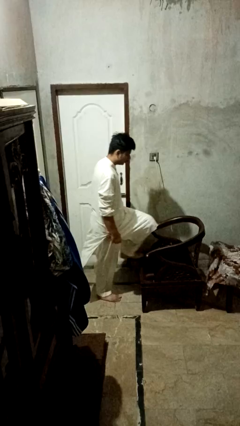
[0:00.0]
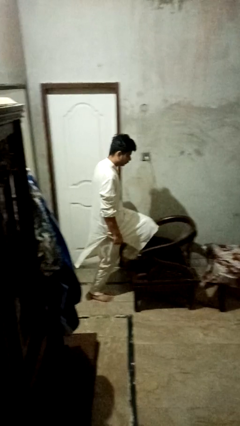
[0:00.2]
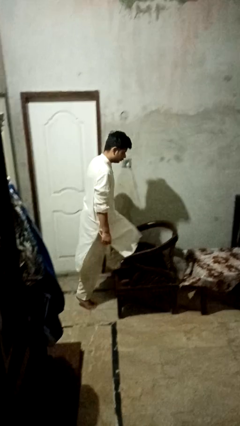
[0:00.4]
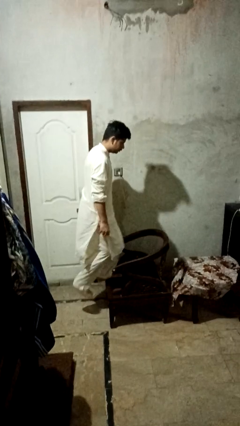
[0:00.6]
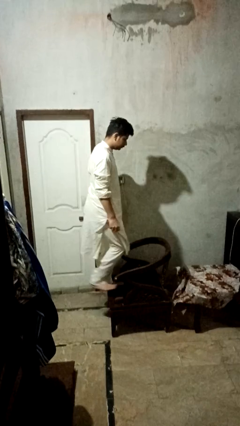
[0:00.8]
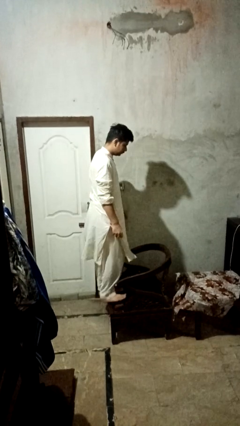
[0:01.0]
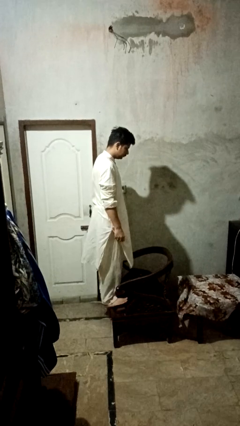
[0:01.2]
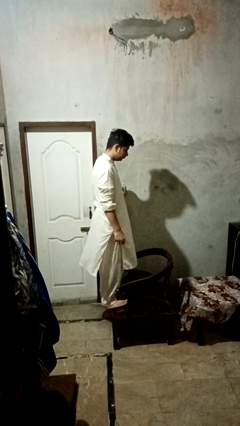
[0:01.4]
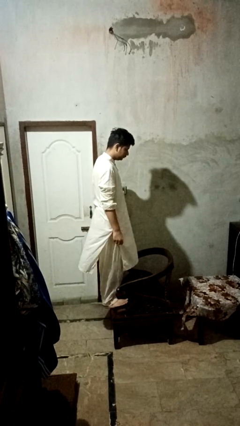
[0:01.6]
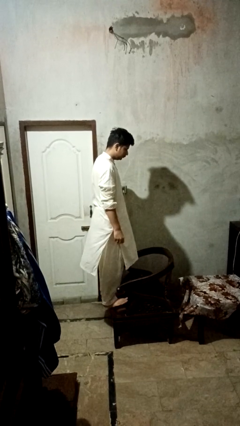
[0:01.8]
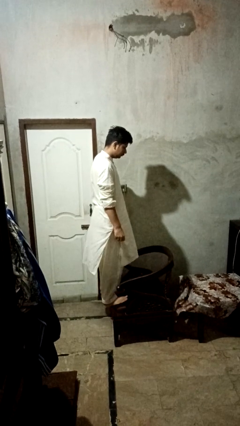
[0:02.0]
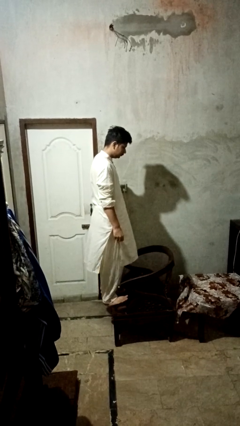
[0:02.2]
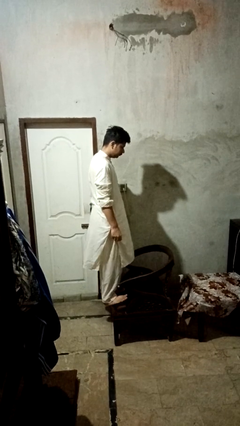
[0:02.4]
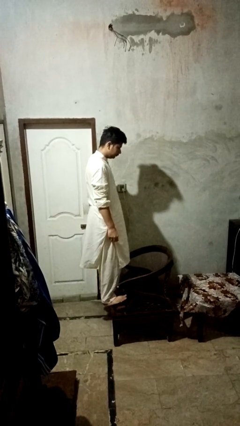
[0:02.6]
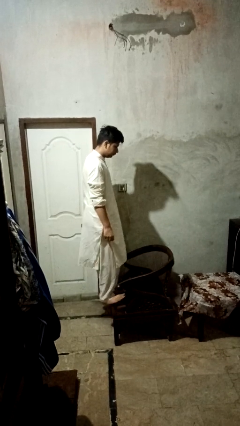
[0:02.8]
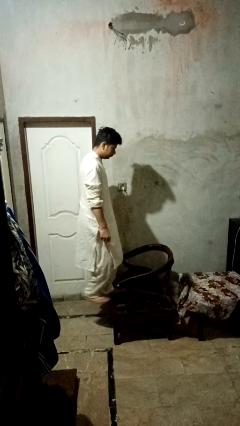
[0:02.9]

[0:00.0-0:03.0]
person climbs on couch

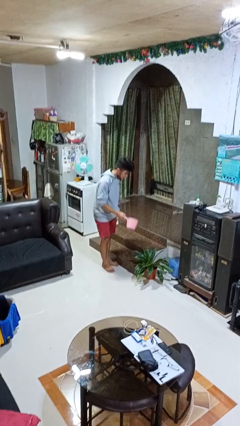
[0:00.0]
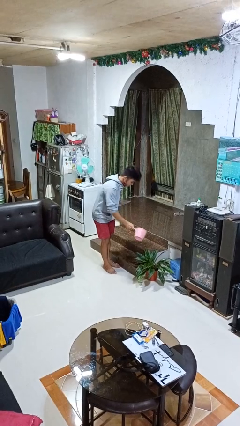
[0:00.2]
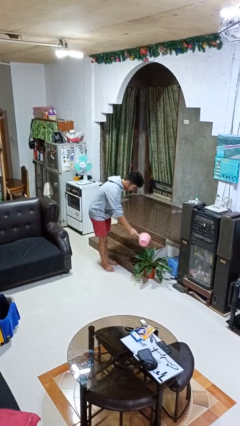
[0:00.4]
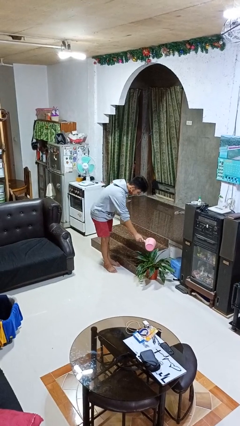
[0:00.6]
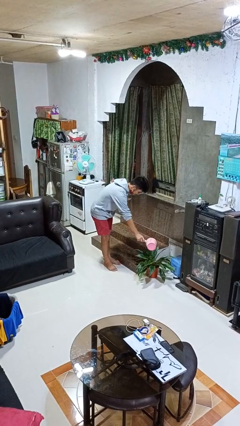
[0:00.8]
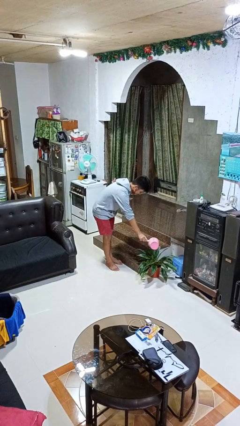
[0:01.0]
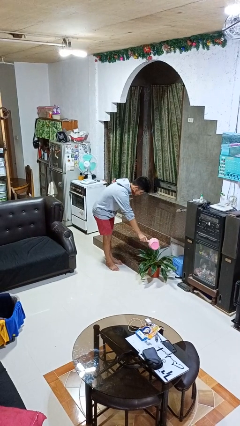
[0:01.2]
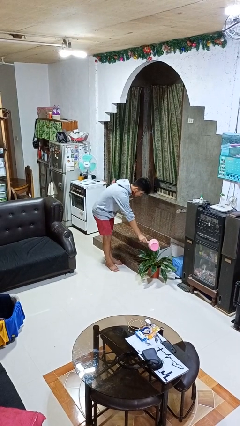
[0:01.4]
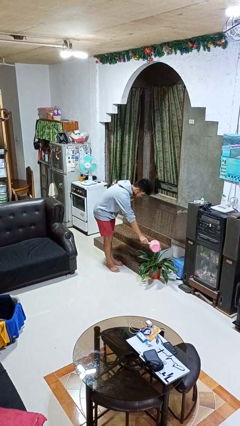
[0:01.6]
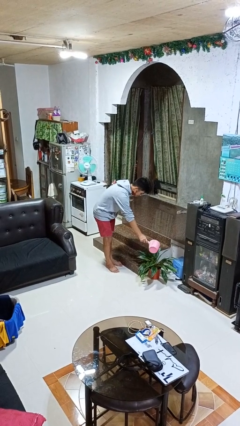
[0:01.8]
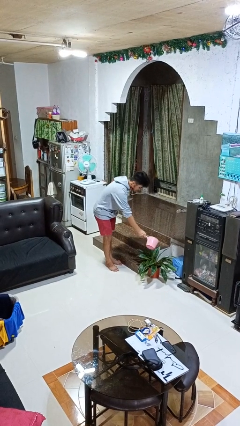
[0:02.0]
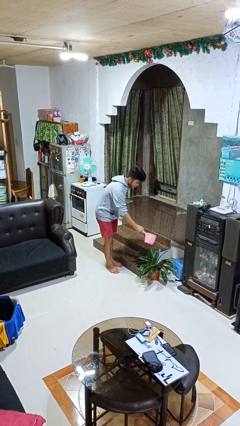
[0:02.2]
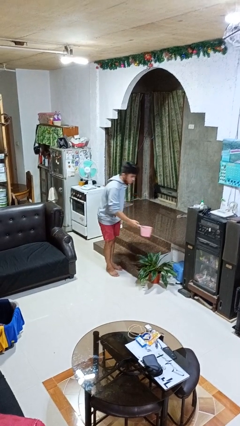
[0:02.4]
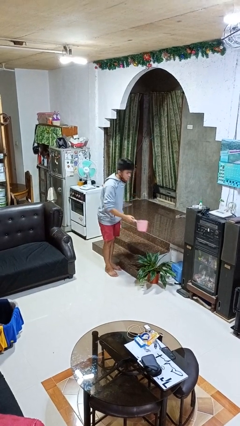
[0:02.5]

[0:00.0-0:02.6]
person waters houseplant

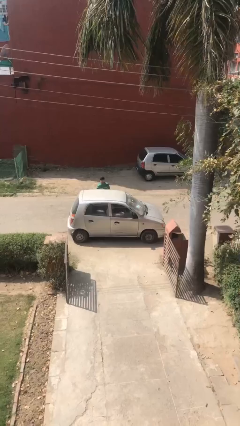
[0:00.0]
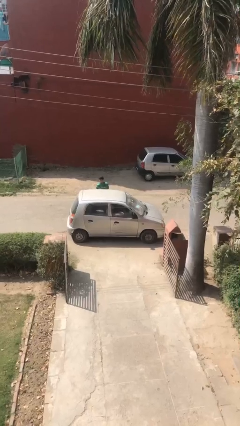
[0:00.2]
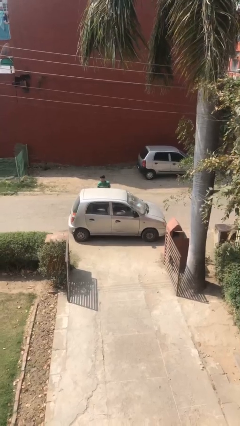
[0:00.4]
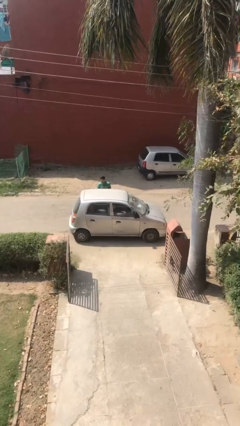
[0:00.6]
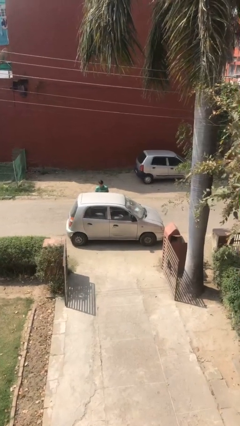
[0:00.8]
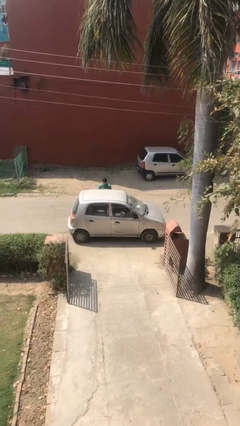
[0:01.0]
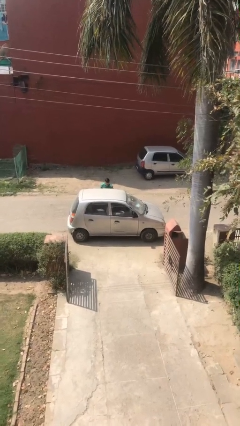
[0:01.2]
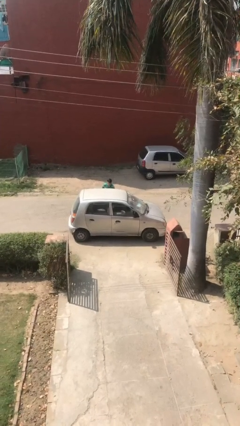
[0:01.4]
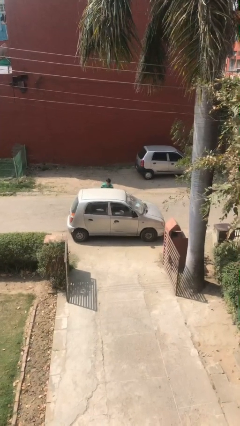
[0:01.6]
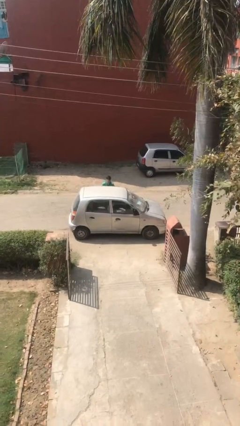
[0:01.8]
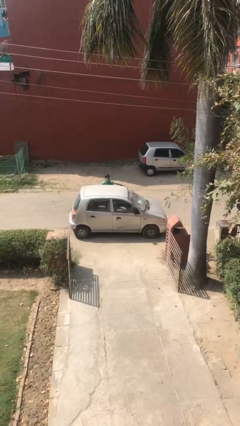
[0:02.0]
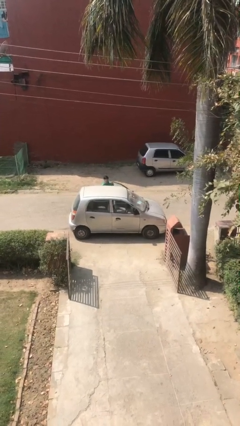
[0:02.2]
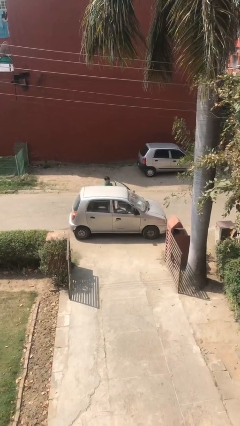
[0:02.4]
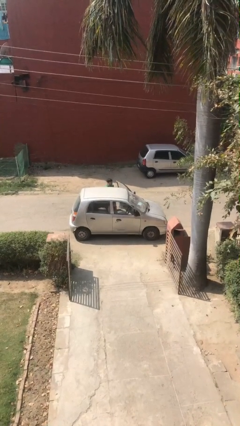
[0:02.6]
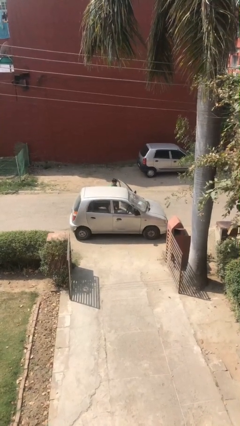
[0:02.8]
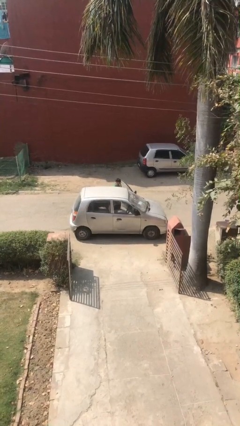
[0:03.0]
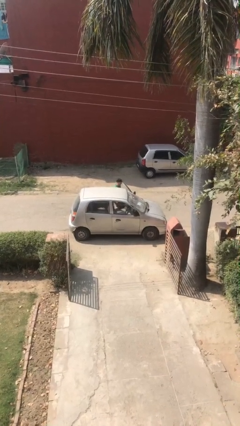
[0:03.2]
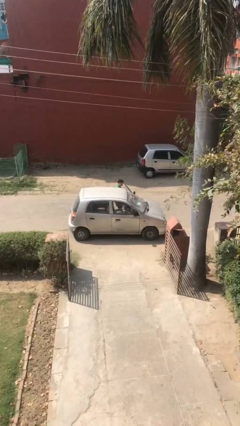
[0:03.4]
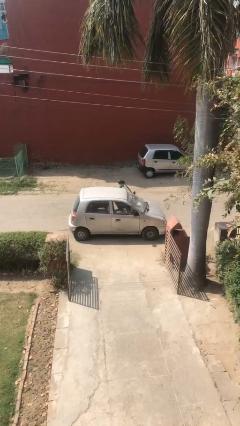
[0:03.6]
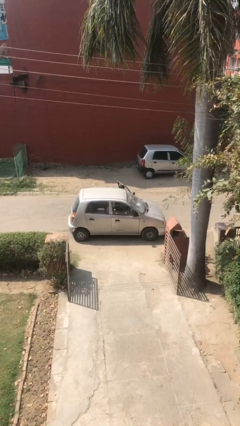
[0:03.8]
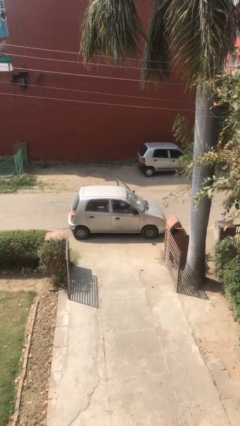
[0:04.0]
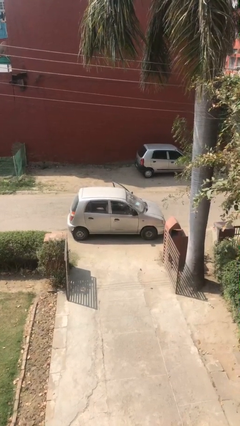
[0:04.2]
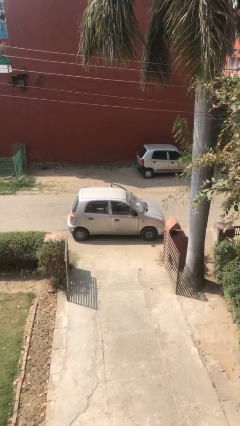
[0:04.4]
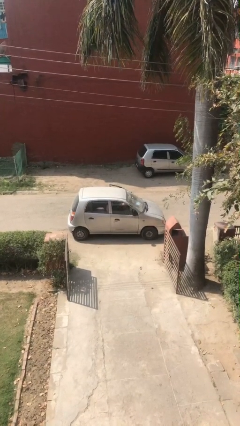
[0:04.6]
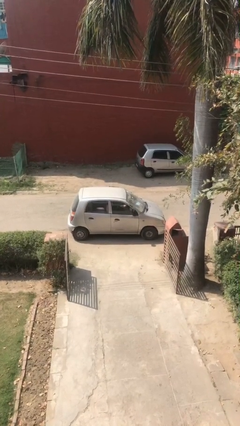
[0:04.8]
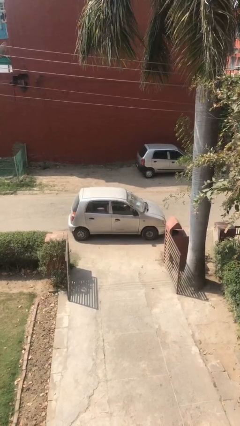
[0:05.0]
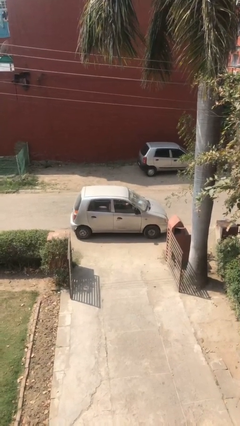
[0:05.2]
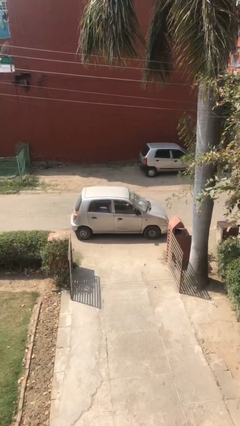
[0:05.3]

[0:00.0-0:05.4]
car picks up person

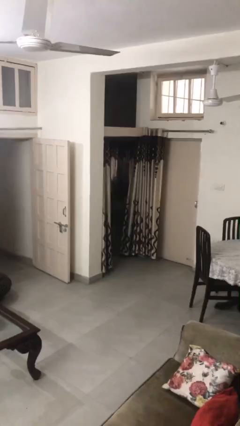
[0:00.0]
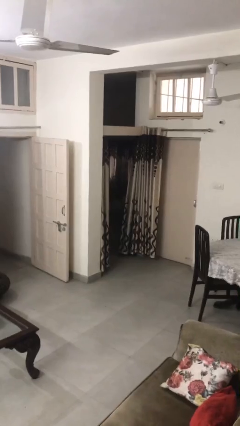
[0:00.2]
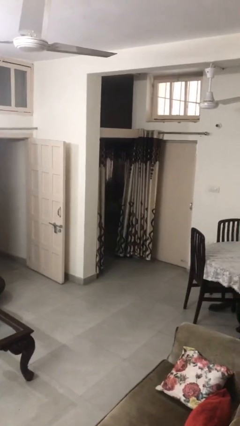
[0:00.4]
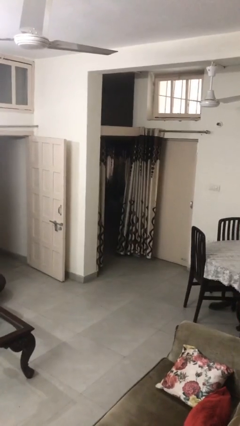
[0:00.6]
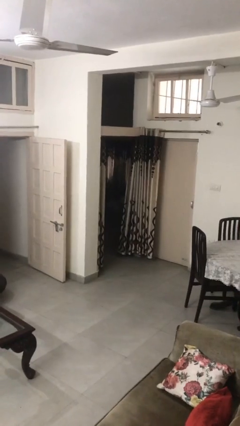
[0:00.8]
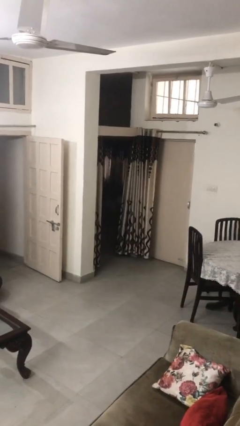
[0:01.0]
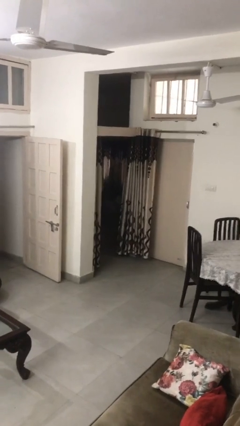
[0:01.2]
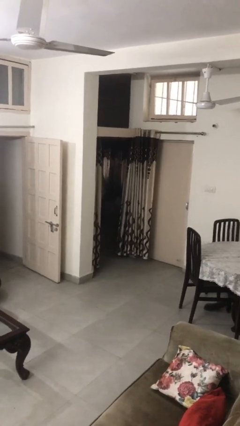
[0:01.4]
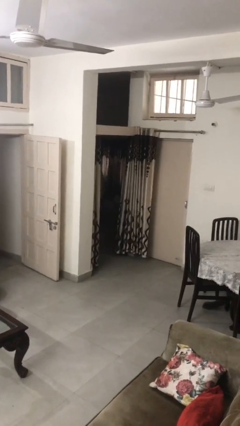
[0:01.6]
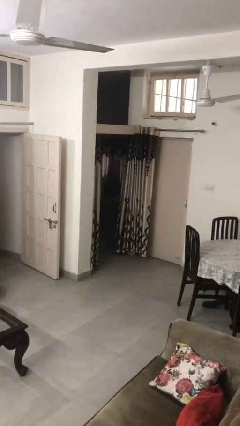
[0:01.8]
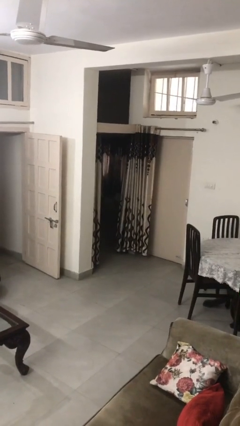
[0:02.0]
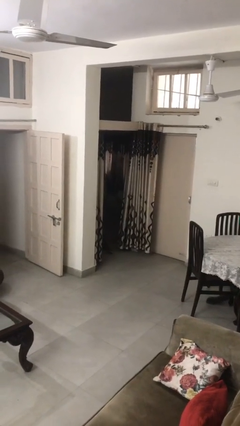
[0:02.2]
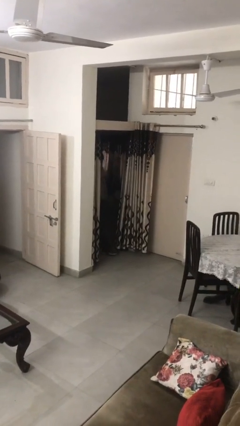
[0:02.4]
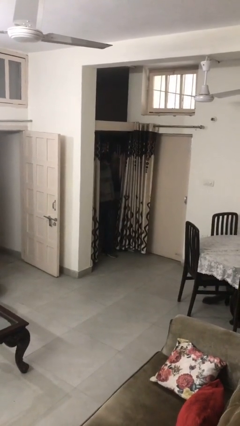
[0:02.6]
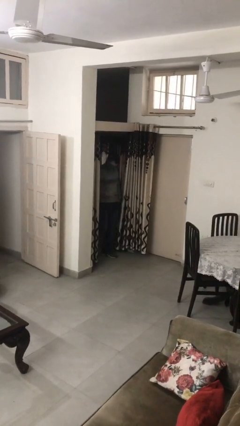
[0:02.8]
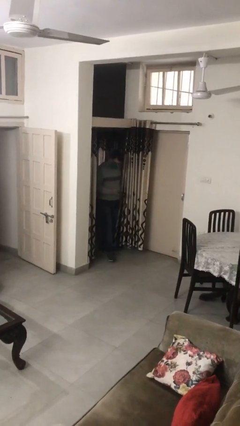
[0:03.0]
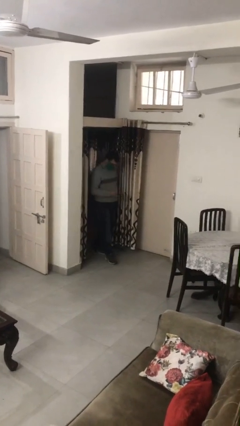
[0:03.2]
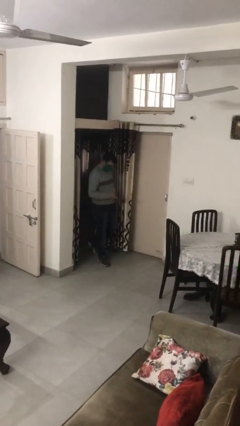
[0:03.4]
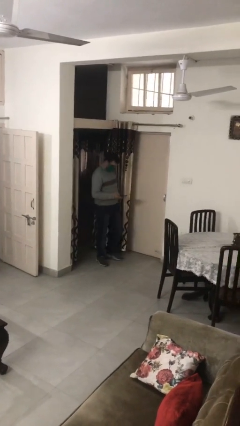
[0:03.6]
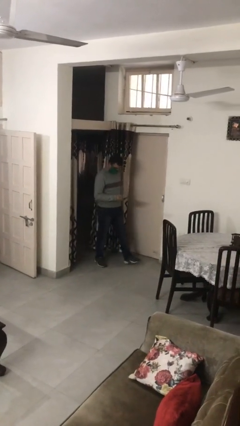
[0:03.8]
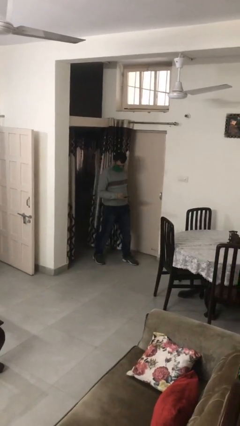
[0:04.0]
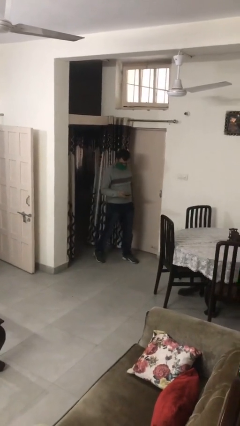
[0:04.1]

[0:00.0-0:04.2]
person enters scene through structure

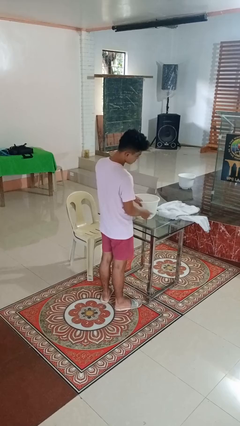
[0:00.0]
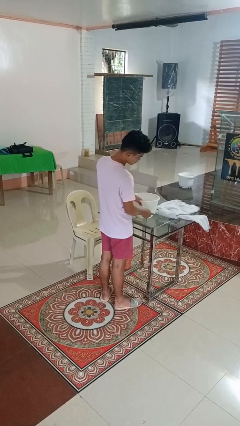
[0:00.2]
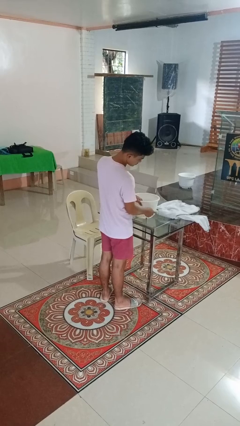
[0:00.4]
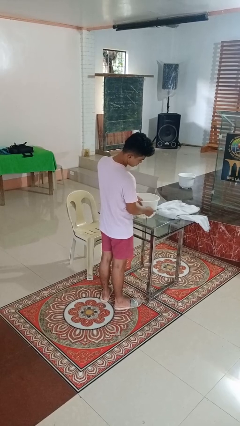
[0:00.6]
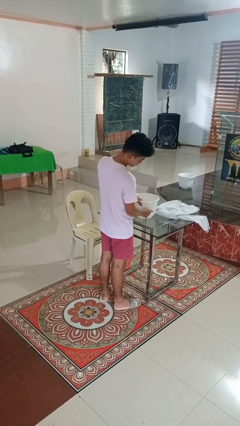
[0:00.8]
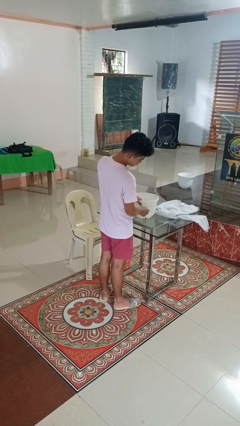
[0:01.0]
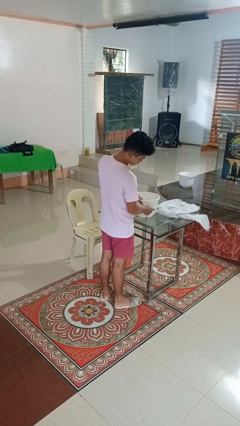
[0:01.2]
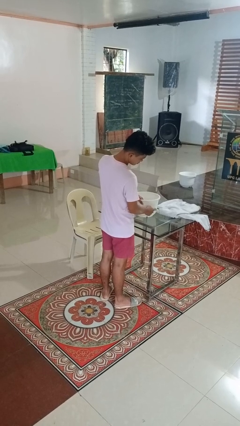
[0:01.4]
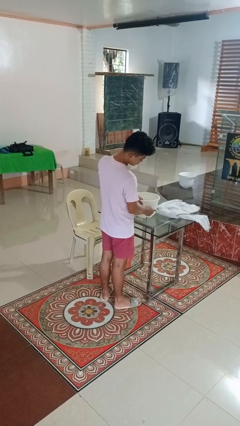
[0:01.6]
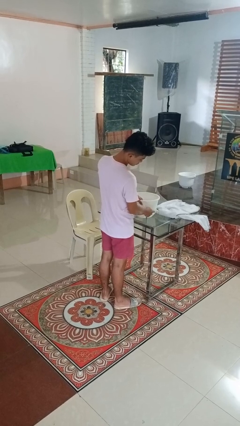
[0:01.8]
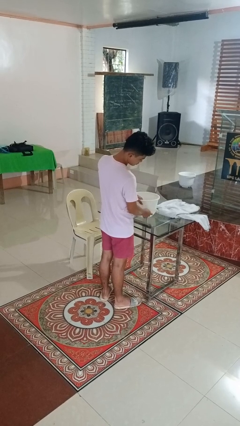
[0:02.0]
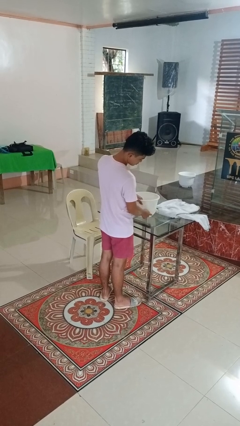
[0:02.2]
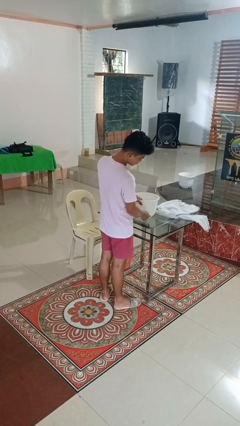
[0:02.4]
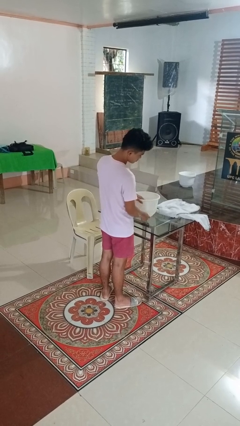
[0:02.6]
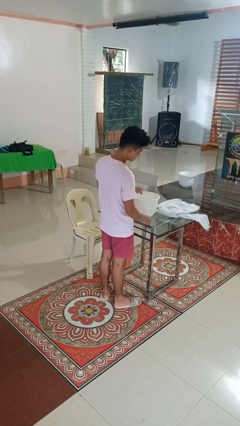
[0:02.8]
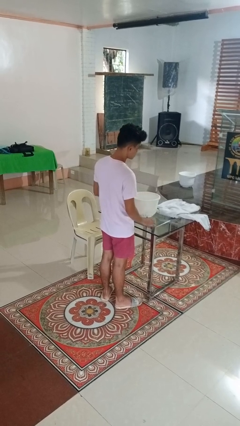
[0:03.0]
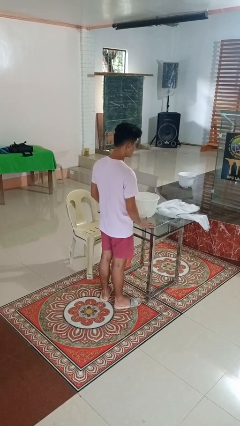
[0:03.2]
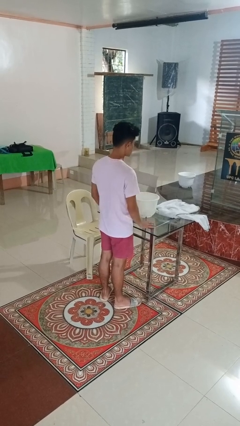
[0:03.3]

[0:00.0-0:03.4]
person taps object with finger
